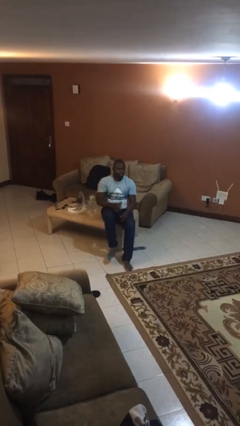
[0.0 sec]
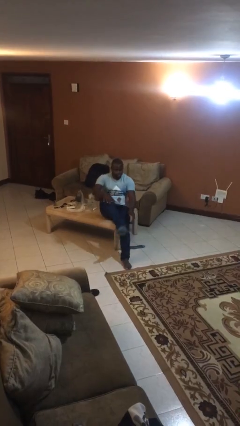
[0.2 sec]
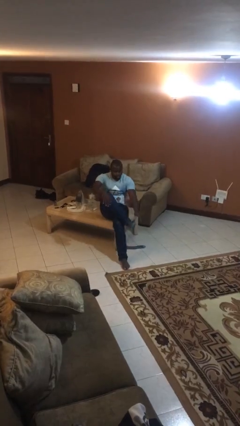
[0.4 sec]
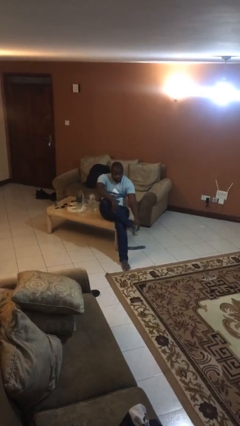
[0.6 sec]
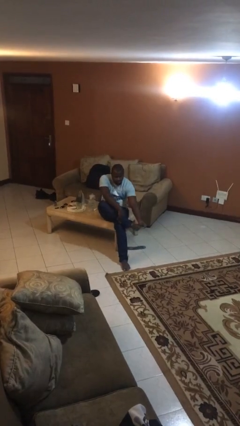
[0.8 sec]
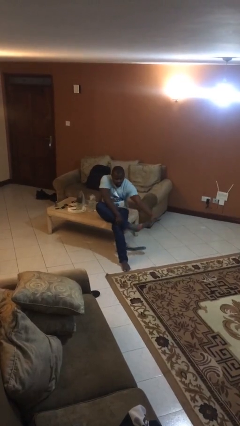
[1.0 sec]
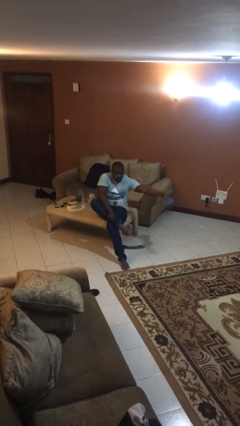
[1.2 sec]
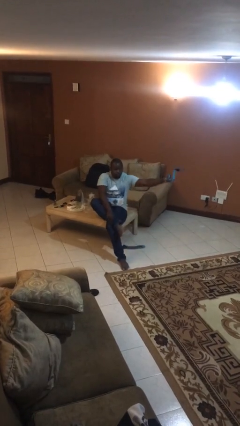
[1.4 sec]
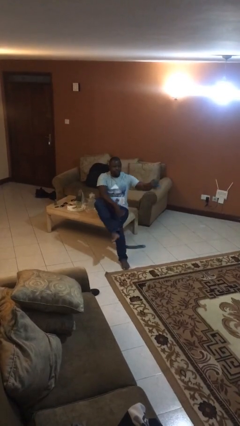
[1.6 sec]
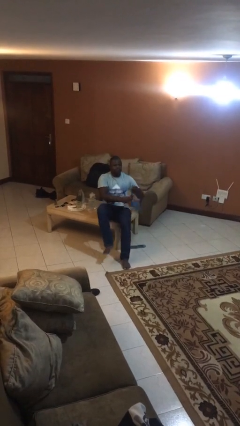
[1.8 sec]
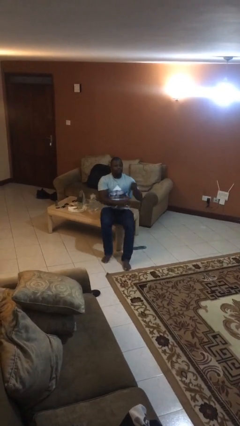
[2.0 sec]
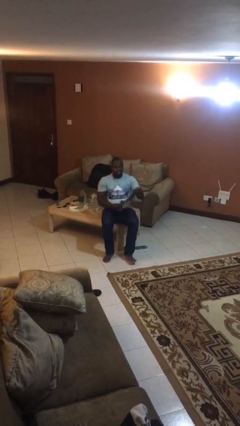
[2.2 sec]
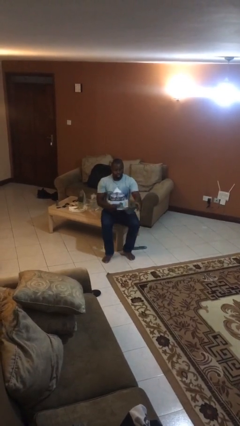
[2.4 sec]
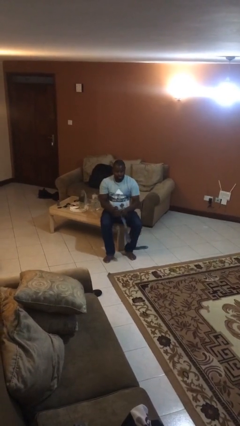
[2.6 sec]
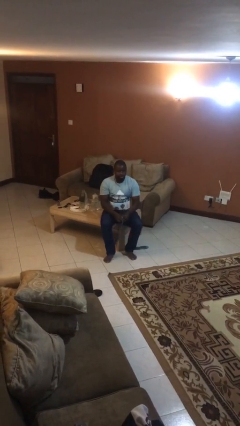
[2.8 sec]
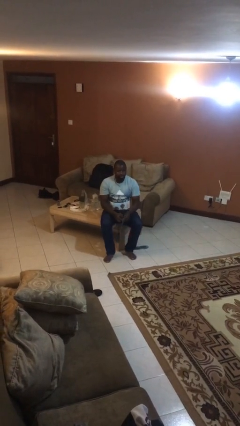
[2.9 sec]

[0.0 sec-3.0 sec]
person takes off socks

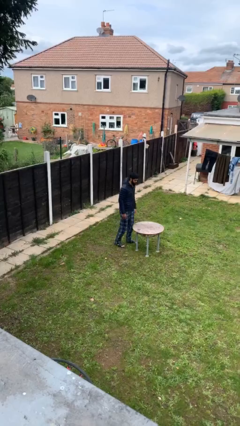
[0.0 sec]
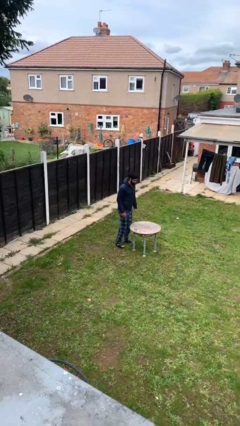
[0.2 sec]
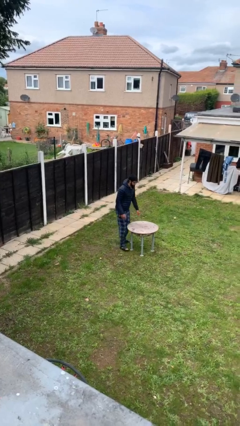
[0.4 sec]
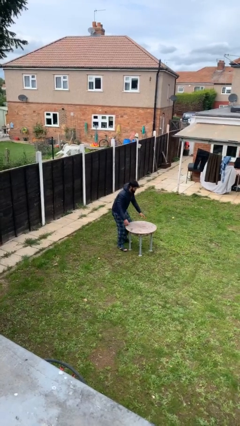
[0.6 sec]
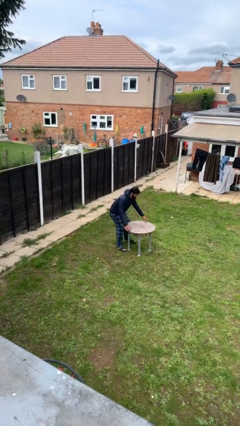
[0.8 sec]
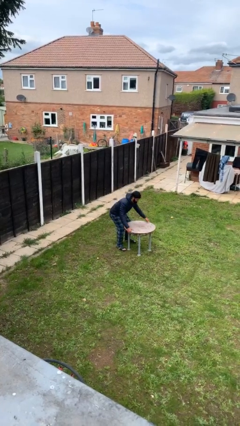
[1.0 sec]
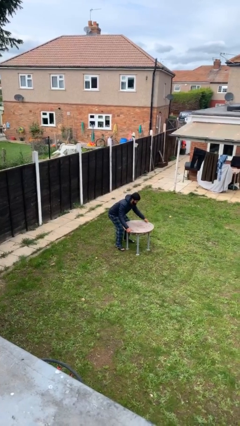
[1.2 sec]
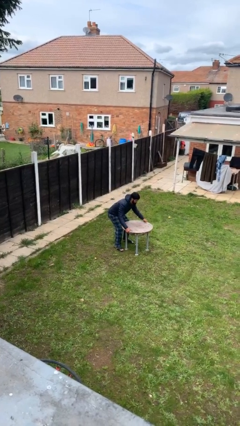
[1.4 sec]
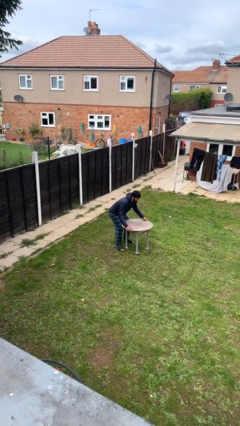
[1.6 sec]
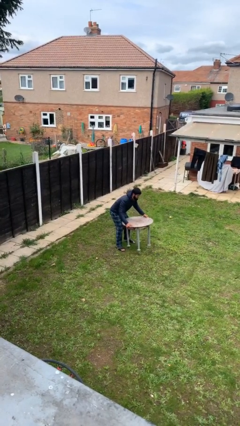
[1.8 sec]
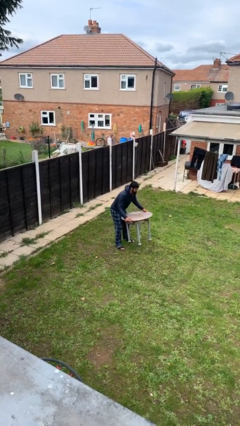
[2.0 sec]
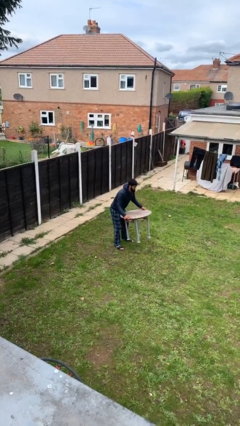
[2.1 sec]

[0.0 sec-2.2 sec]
person picks up object from floor

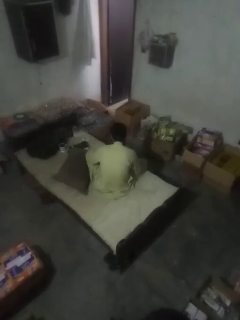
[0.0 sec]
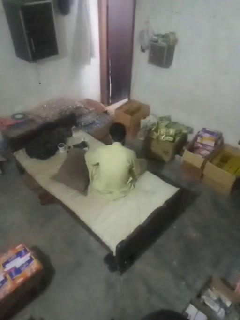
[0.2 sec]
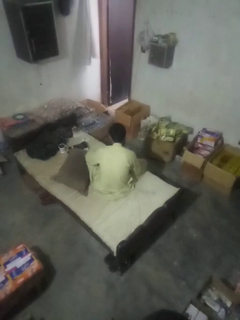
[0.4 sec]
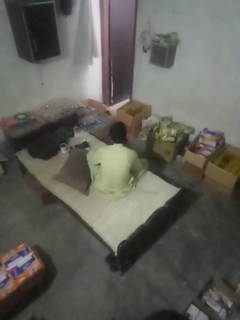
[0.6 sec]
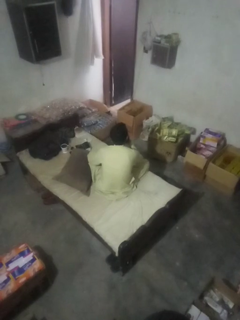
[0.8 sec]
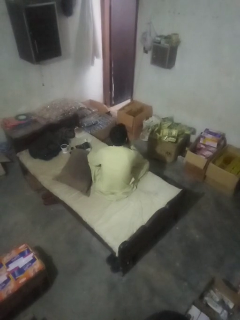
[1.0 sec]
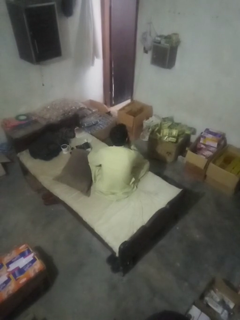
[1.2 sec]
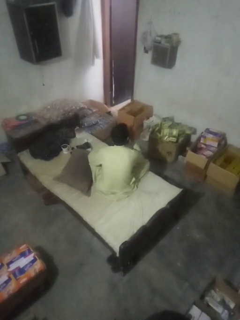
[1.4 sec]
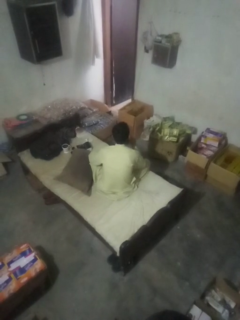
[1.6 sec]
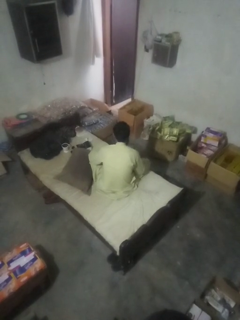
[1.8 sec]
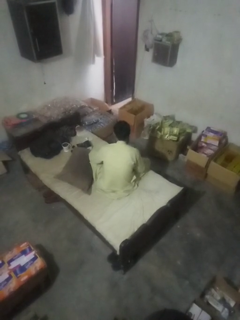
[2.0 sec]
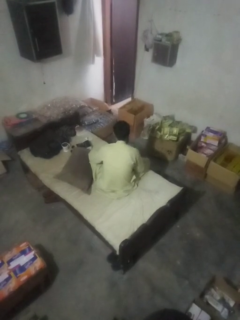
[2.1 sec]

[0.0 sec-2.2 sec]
person gestures be quiet

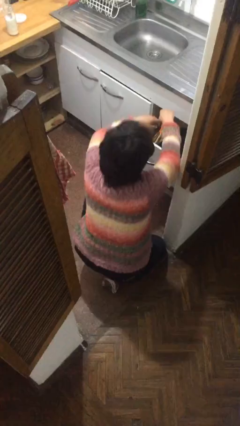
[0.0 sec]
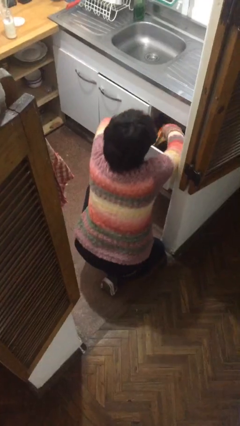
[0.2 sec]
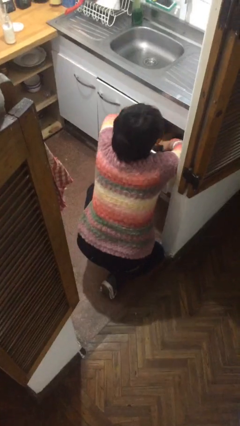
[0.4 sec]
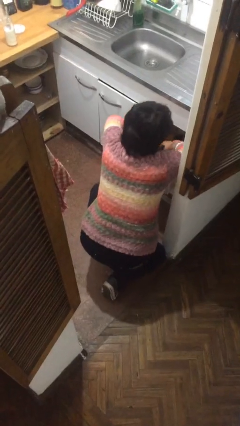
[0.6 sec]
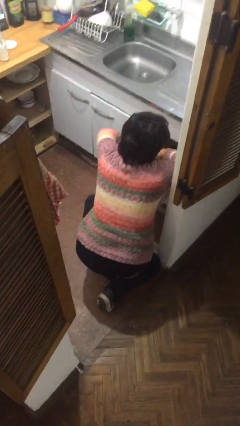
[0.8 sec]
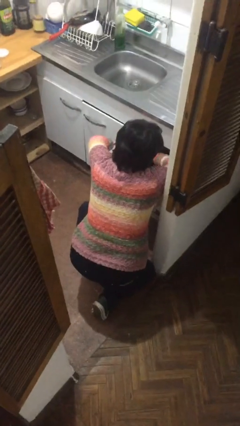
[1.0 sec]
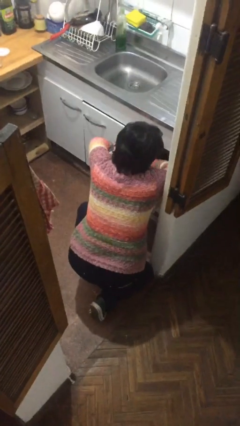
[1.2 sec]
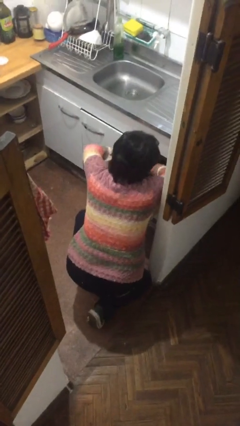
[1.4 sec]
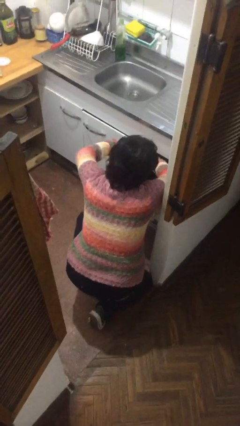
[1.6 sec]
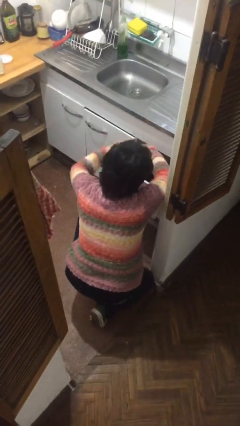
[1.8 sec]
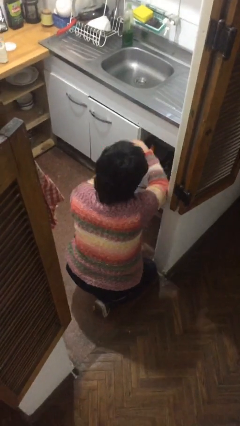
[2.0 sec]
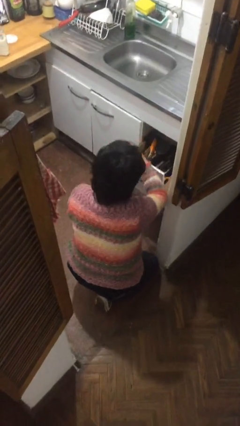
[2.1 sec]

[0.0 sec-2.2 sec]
person searches in kitchen drawer

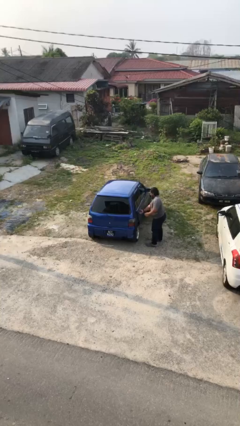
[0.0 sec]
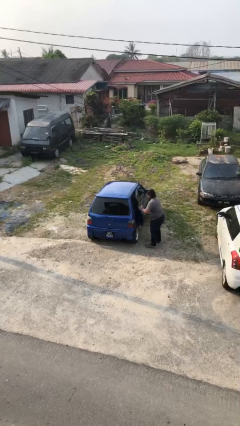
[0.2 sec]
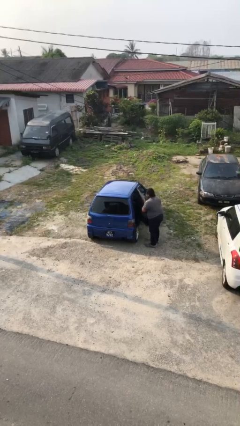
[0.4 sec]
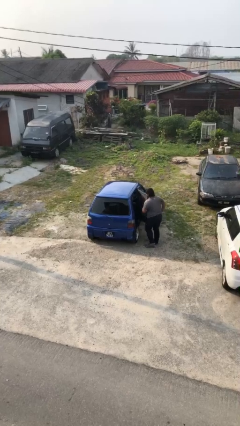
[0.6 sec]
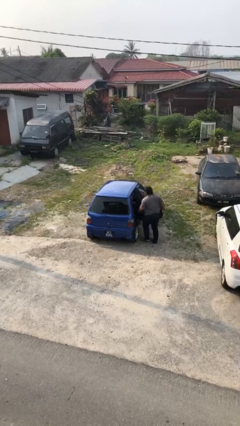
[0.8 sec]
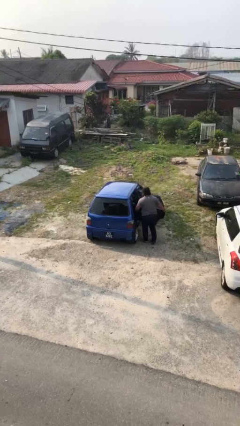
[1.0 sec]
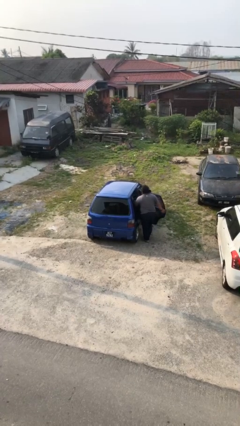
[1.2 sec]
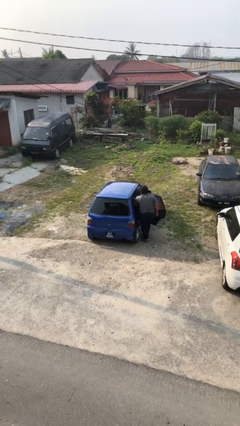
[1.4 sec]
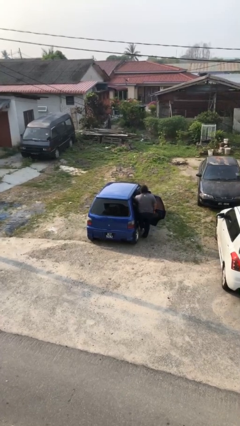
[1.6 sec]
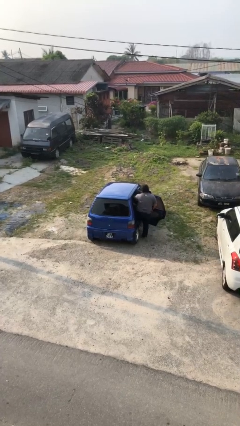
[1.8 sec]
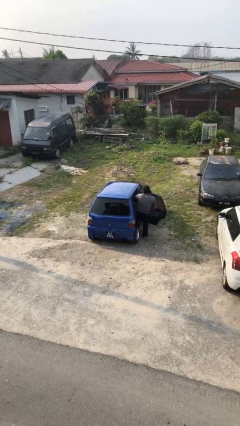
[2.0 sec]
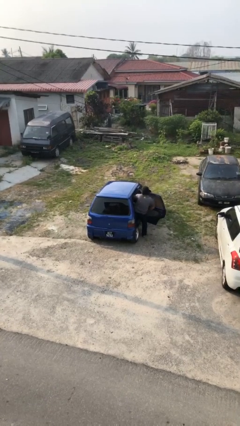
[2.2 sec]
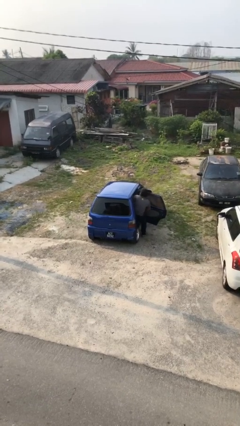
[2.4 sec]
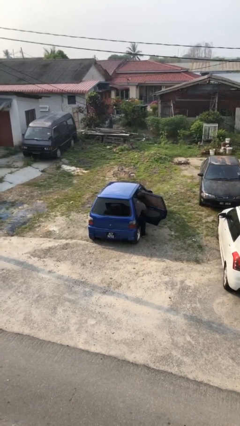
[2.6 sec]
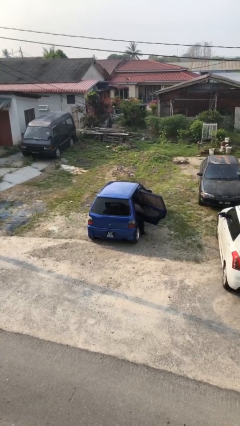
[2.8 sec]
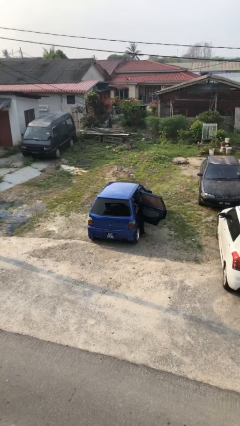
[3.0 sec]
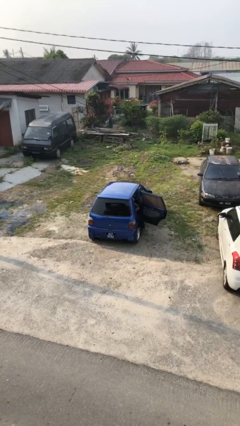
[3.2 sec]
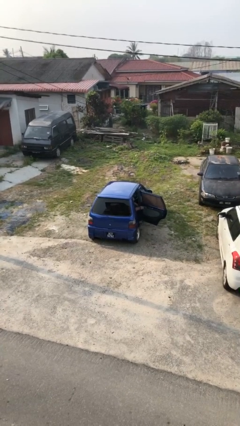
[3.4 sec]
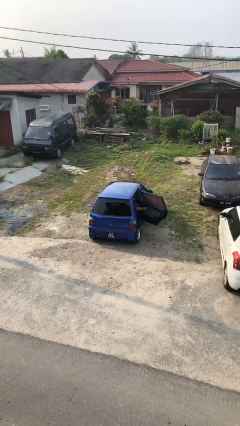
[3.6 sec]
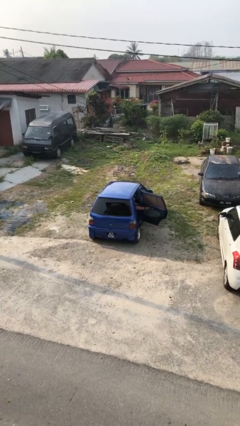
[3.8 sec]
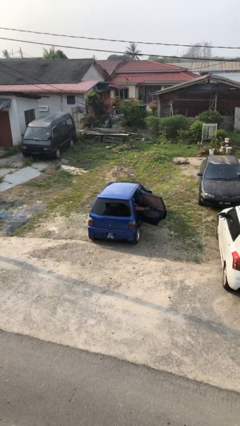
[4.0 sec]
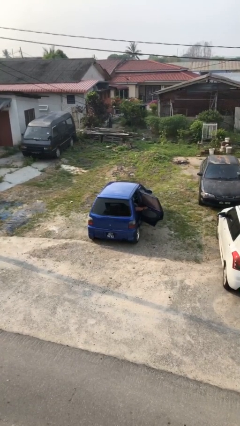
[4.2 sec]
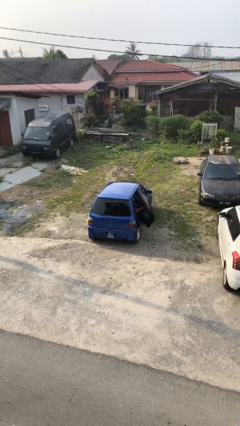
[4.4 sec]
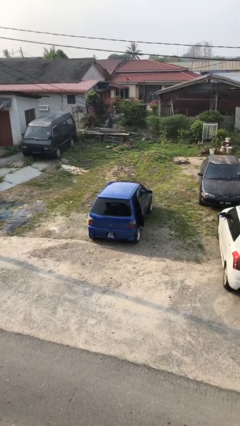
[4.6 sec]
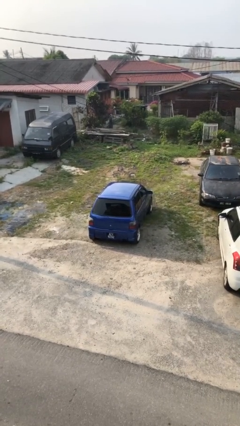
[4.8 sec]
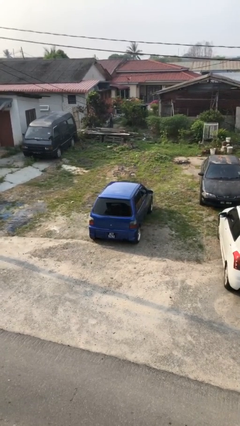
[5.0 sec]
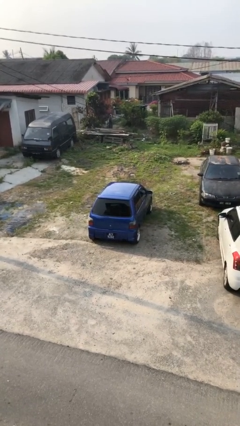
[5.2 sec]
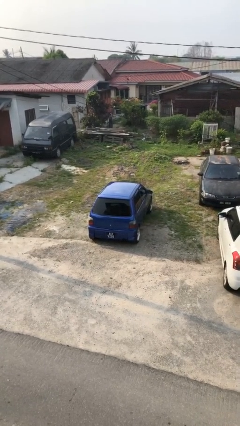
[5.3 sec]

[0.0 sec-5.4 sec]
car picks up person

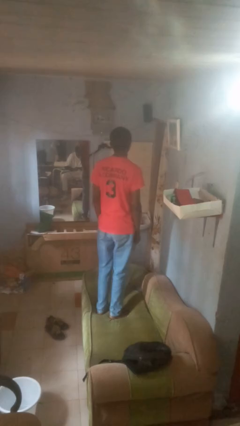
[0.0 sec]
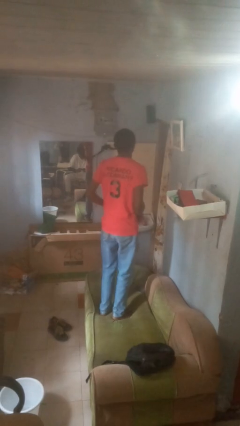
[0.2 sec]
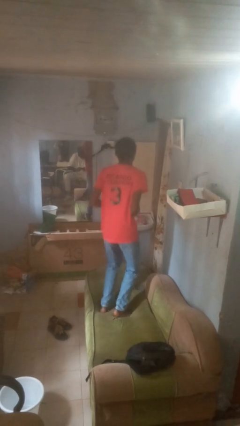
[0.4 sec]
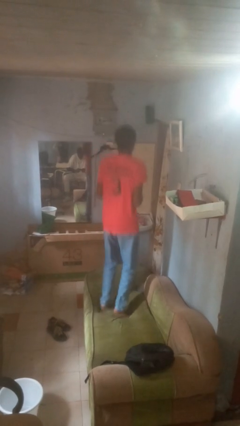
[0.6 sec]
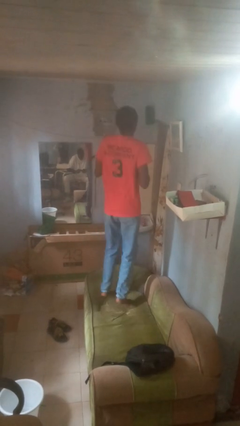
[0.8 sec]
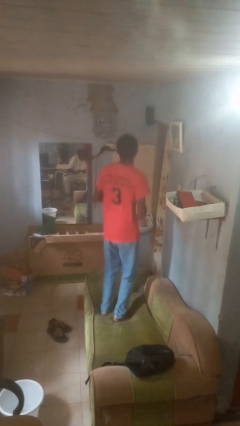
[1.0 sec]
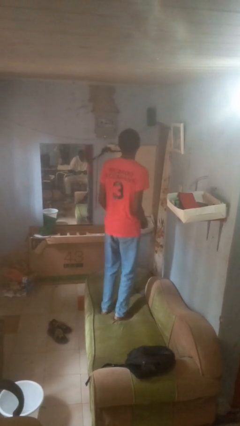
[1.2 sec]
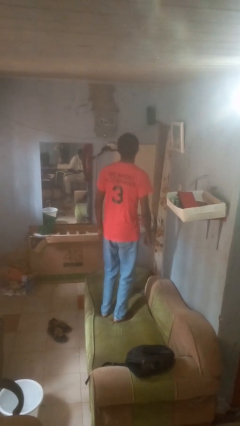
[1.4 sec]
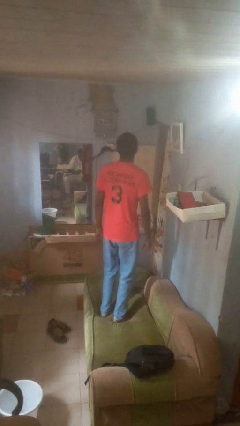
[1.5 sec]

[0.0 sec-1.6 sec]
person jumps on couch

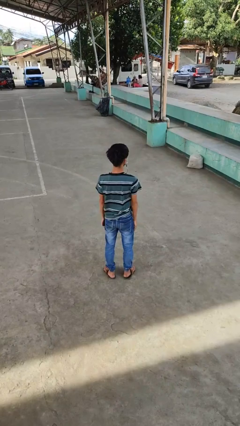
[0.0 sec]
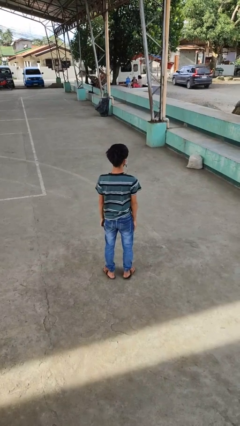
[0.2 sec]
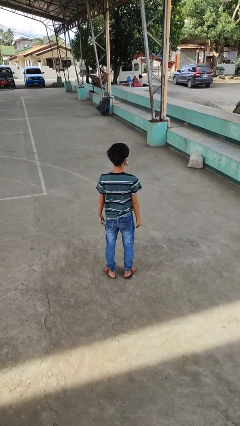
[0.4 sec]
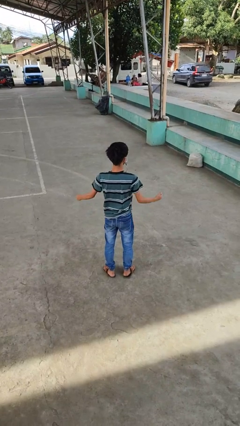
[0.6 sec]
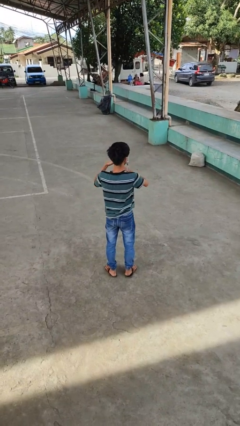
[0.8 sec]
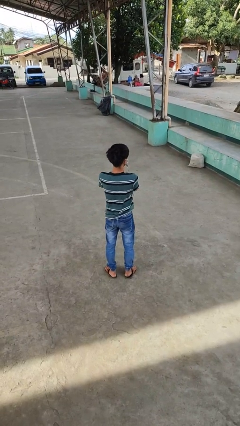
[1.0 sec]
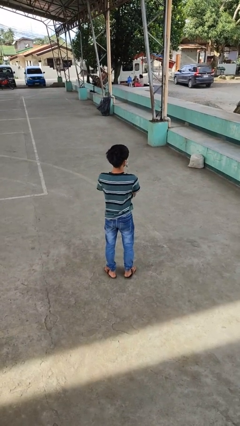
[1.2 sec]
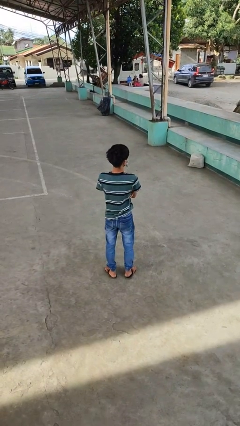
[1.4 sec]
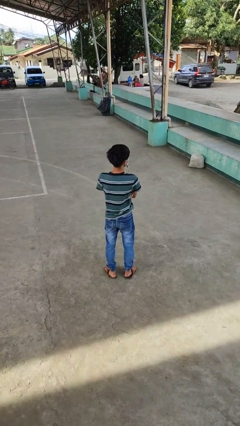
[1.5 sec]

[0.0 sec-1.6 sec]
person crosses arms
